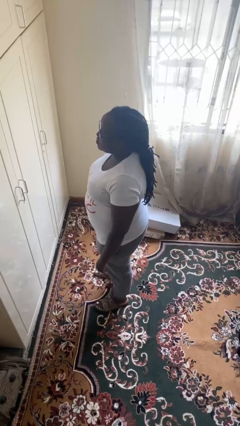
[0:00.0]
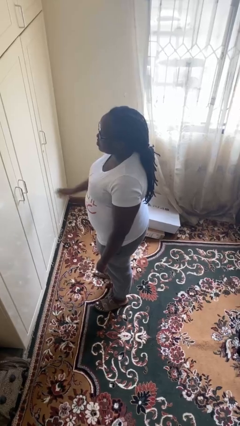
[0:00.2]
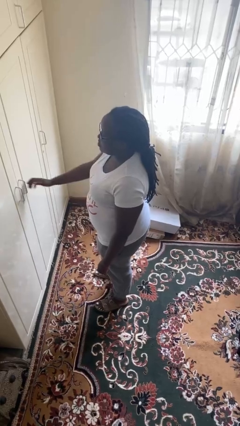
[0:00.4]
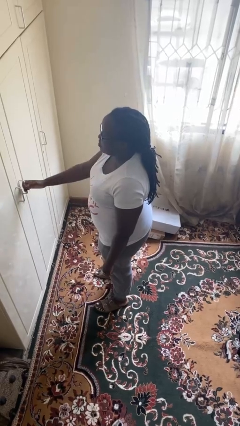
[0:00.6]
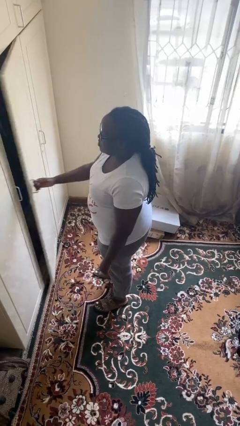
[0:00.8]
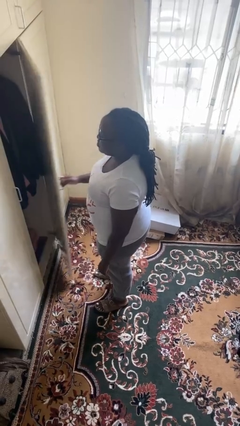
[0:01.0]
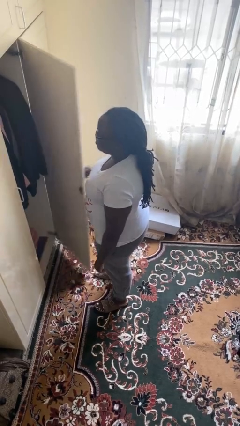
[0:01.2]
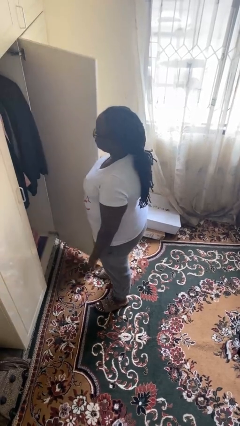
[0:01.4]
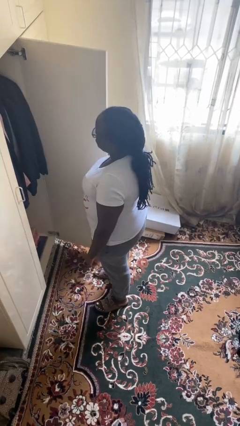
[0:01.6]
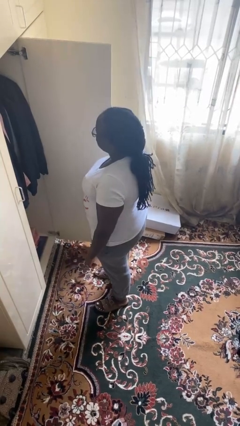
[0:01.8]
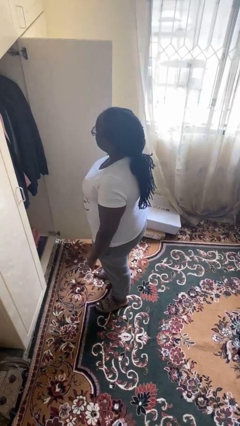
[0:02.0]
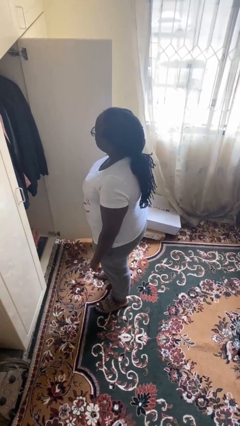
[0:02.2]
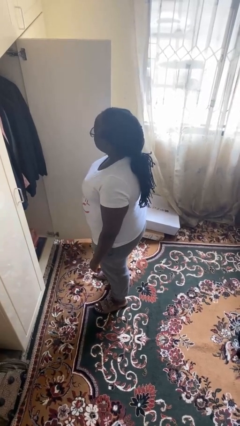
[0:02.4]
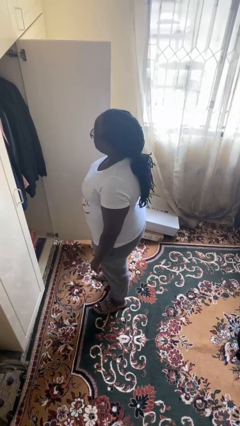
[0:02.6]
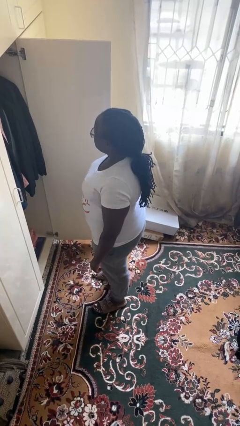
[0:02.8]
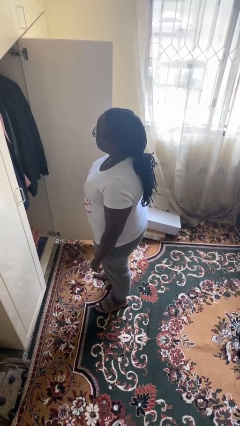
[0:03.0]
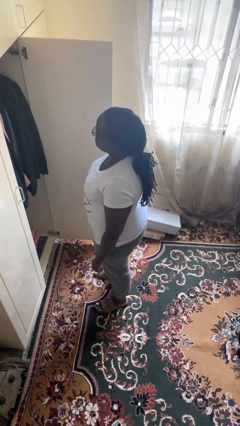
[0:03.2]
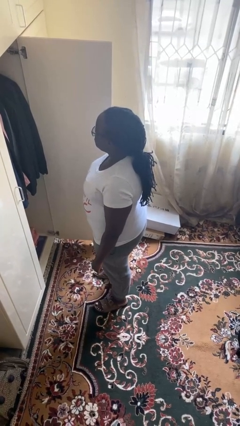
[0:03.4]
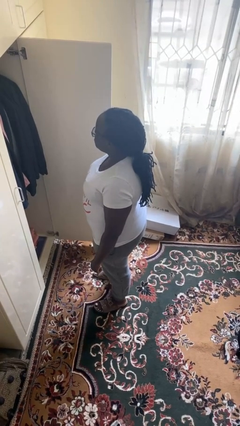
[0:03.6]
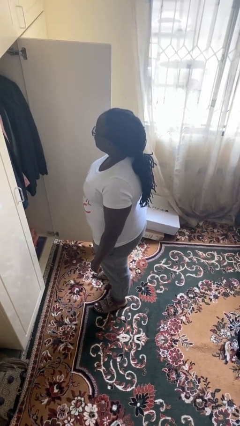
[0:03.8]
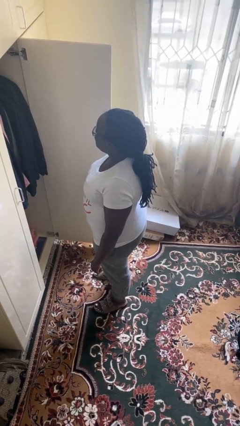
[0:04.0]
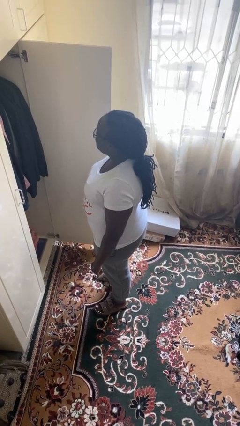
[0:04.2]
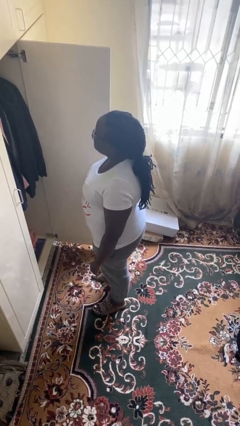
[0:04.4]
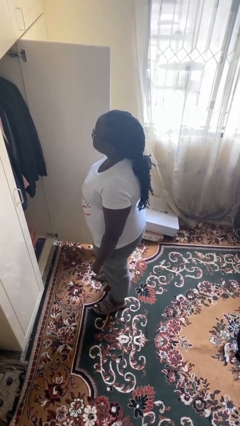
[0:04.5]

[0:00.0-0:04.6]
person opens closet door

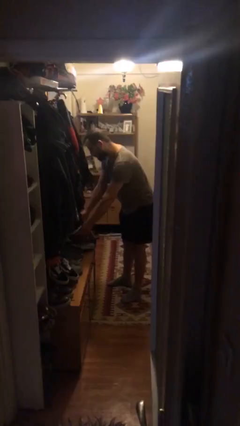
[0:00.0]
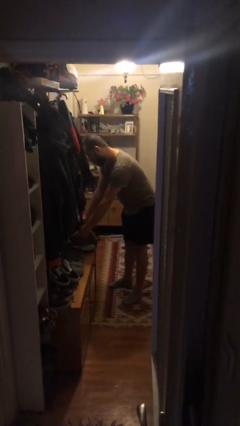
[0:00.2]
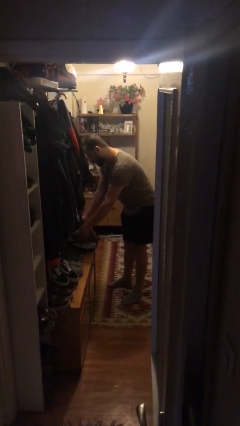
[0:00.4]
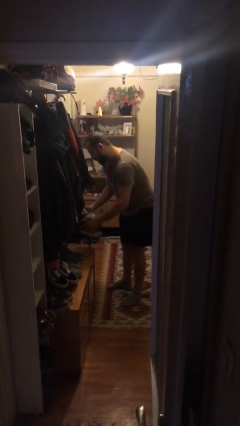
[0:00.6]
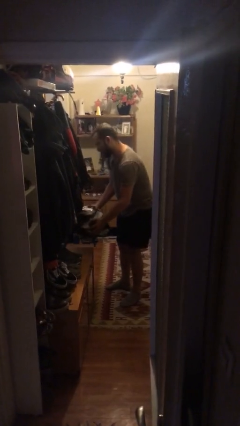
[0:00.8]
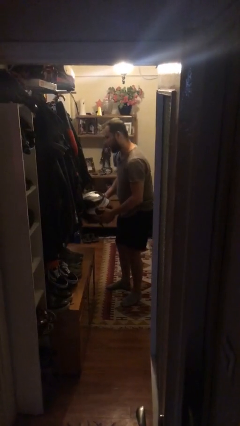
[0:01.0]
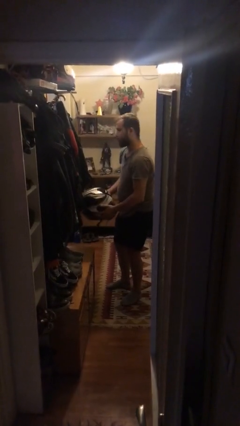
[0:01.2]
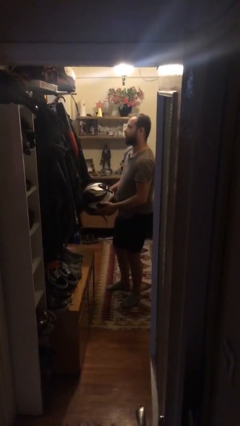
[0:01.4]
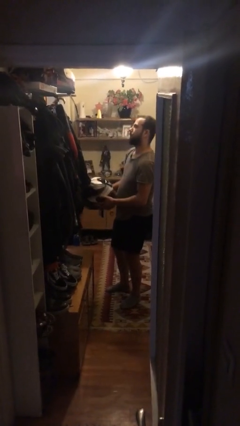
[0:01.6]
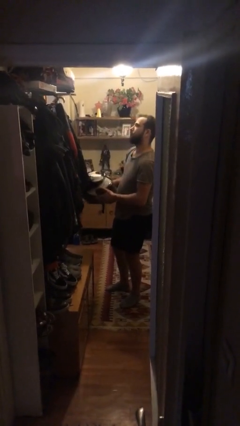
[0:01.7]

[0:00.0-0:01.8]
person picks up object from table

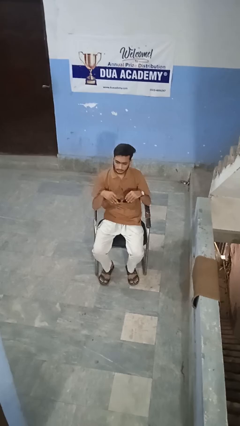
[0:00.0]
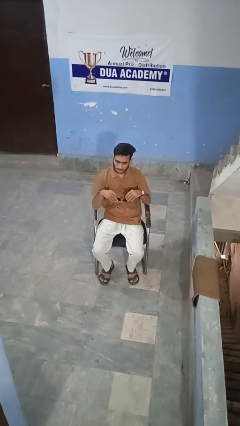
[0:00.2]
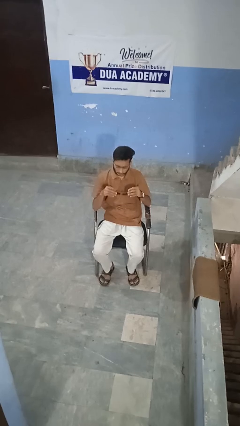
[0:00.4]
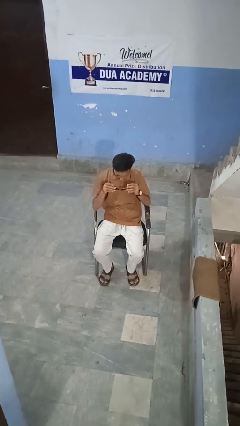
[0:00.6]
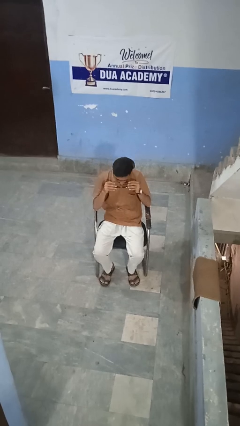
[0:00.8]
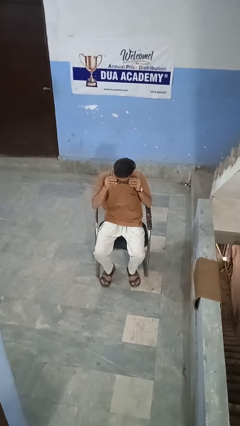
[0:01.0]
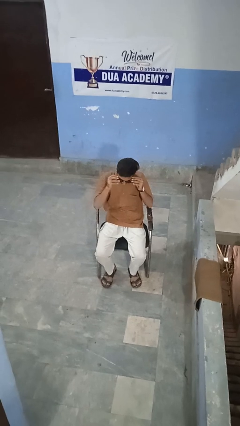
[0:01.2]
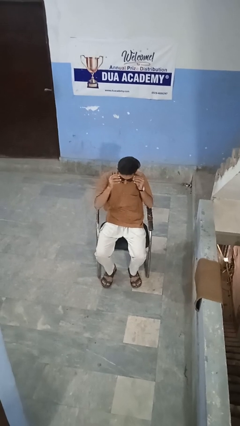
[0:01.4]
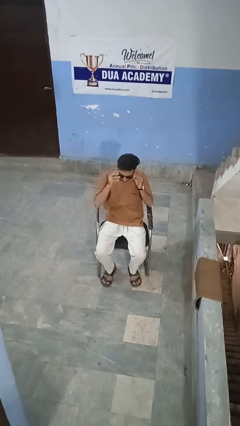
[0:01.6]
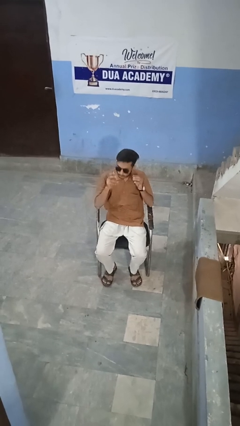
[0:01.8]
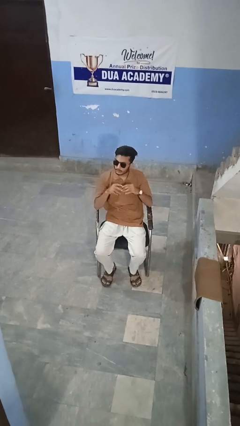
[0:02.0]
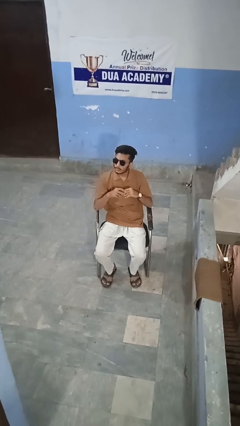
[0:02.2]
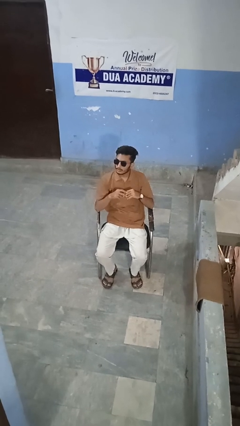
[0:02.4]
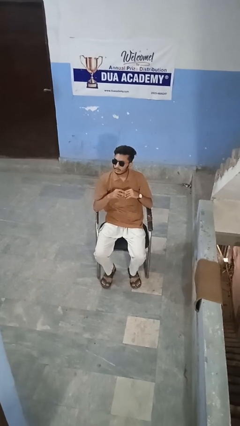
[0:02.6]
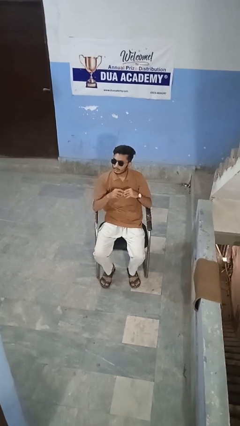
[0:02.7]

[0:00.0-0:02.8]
person puts on sunglasses

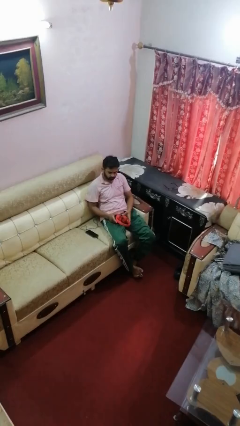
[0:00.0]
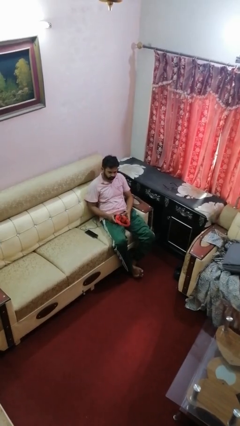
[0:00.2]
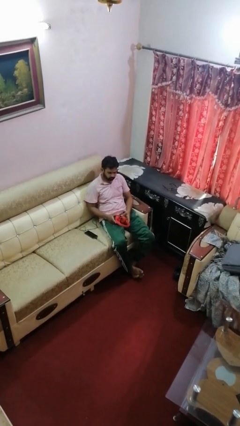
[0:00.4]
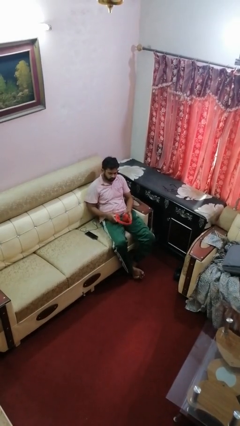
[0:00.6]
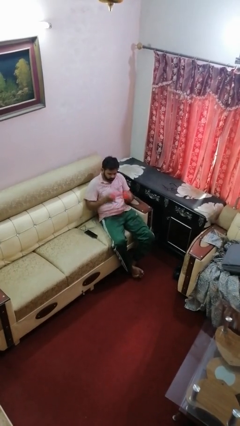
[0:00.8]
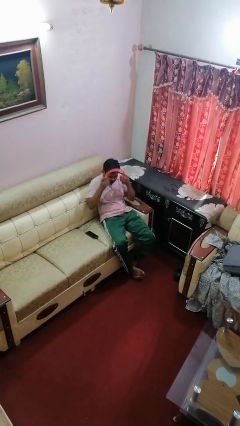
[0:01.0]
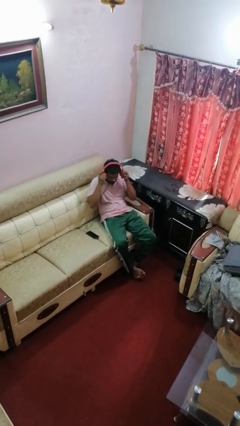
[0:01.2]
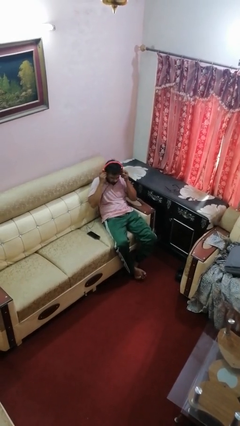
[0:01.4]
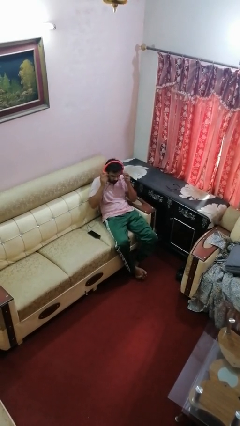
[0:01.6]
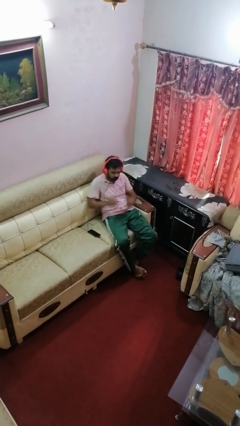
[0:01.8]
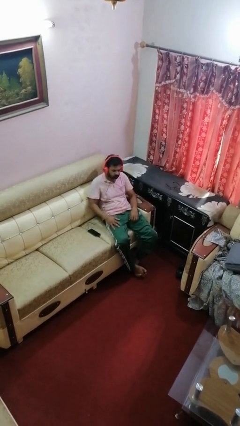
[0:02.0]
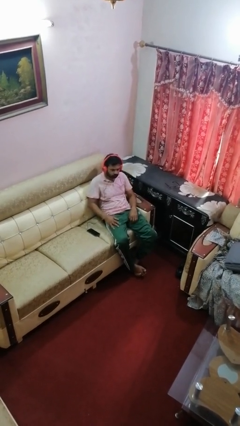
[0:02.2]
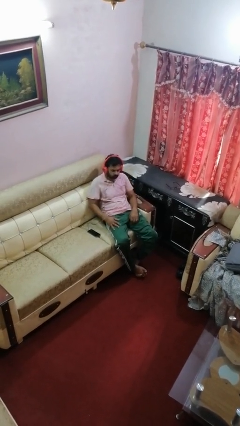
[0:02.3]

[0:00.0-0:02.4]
person puts on headphones

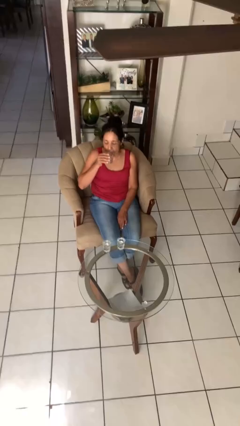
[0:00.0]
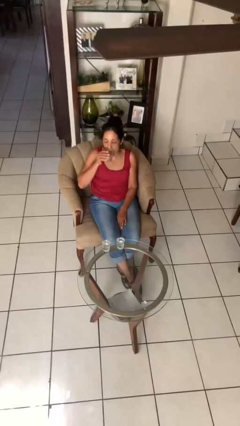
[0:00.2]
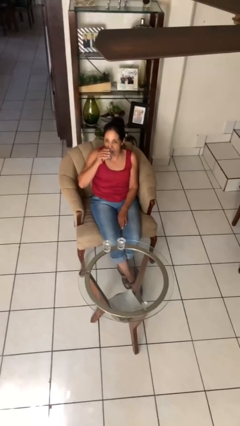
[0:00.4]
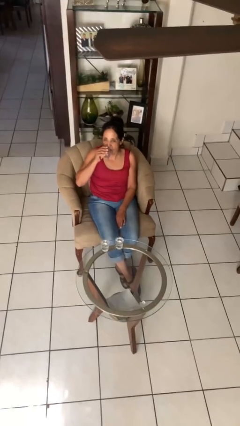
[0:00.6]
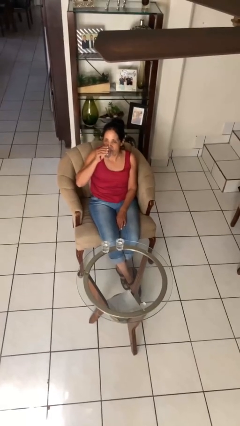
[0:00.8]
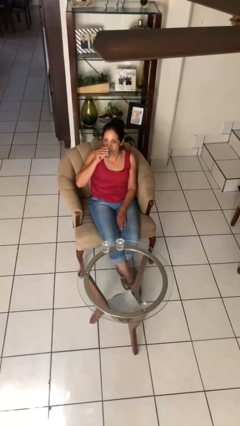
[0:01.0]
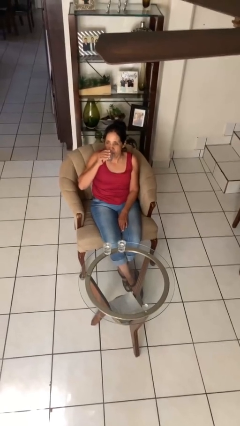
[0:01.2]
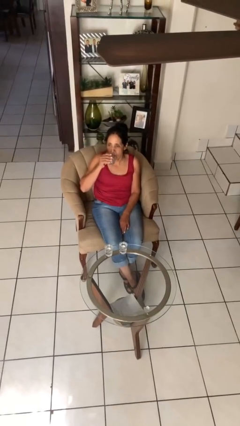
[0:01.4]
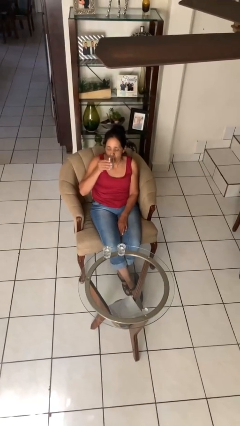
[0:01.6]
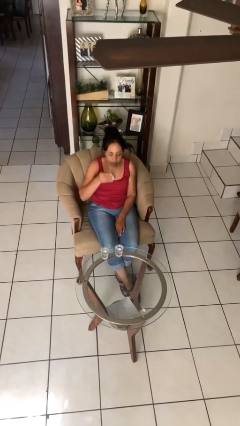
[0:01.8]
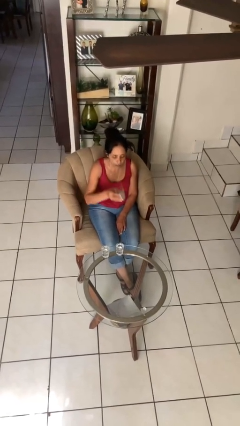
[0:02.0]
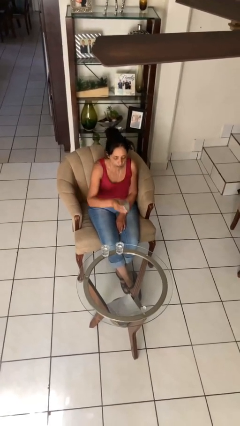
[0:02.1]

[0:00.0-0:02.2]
person drinks from shotglass

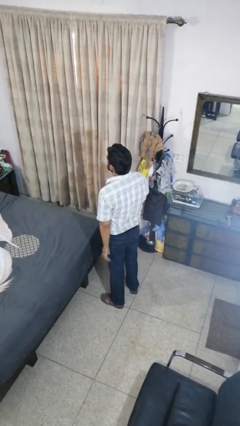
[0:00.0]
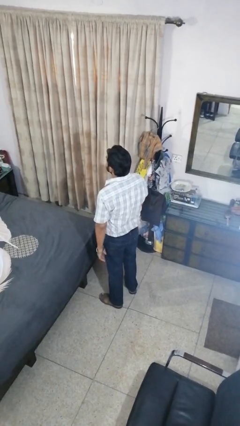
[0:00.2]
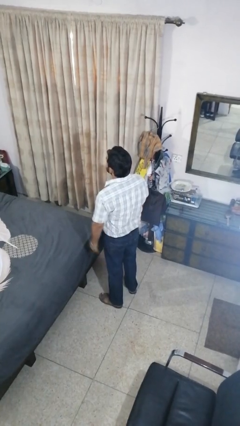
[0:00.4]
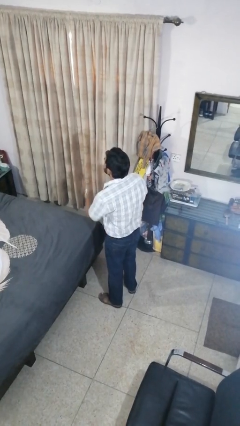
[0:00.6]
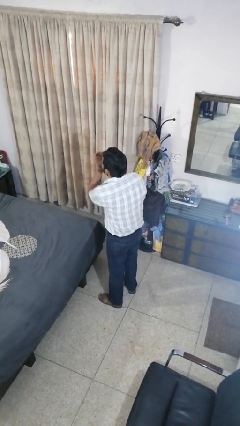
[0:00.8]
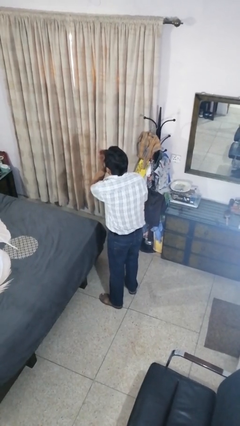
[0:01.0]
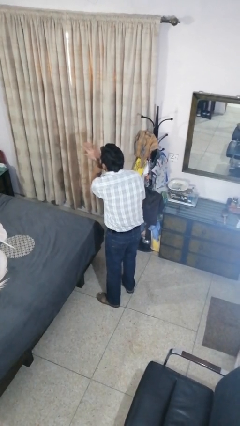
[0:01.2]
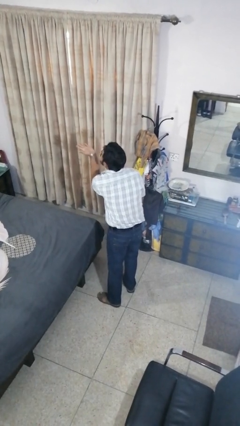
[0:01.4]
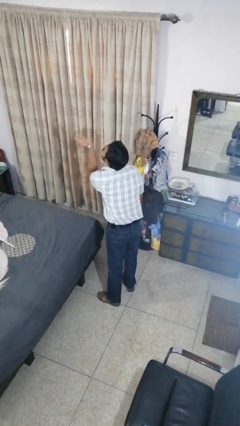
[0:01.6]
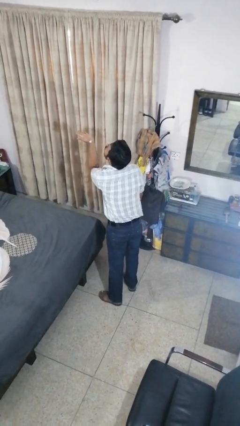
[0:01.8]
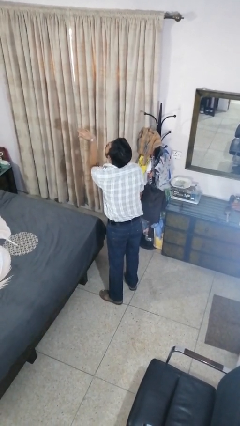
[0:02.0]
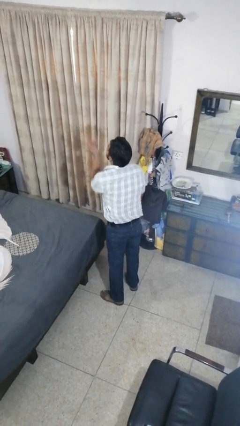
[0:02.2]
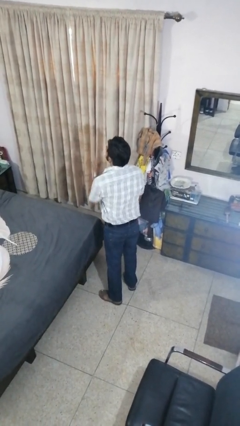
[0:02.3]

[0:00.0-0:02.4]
person gestures blow kiss

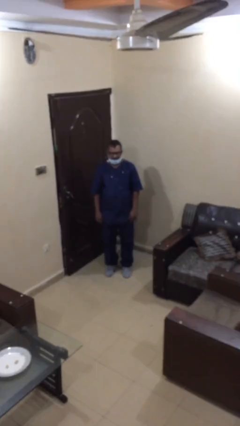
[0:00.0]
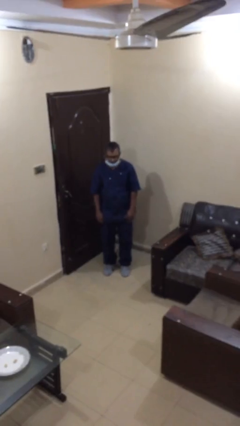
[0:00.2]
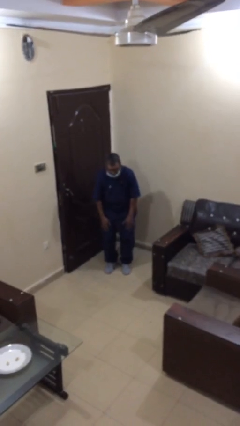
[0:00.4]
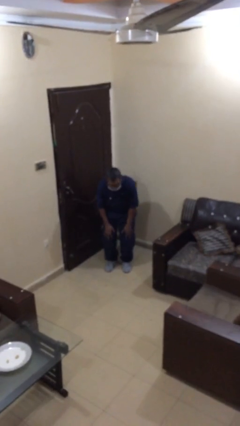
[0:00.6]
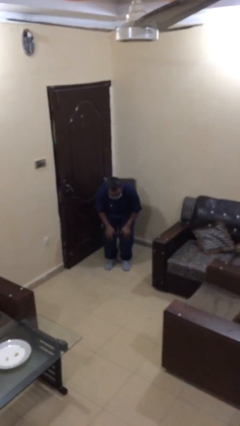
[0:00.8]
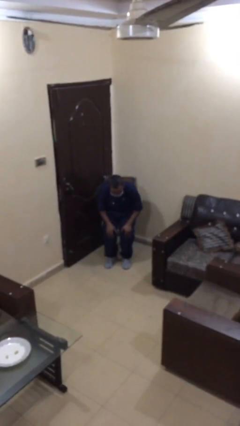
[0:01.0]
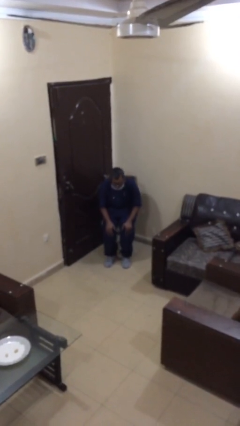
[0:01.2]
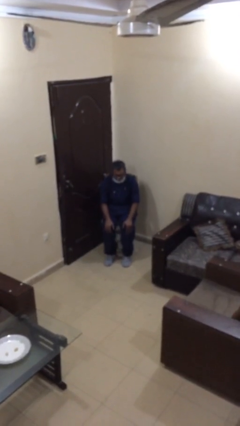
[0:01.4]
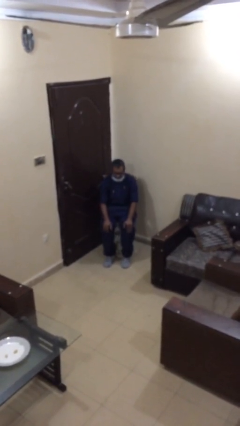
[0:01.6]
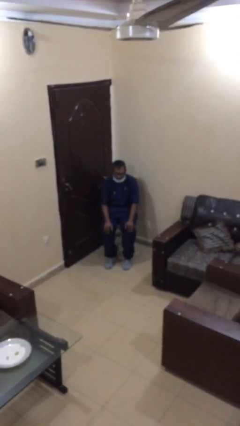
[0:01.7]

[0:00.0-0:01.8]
person sits down
